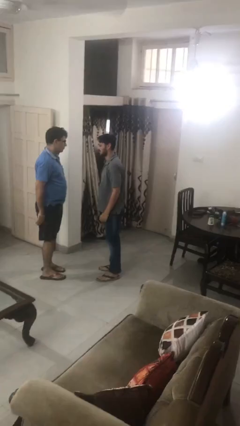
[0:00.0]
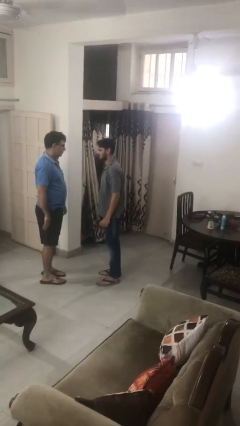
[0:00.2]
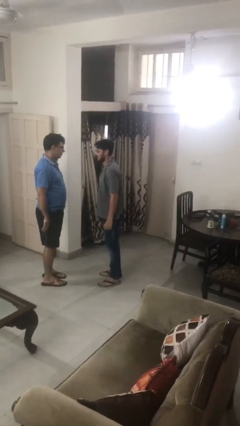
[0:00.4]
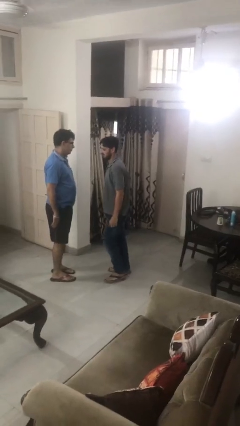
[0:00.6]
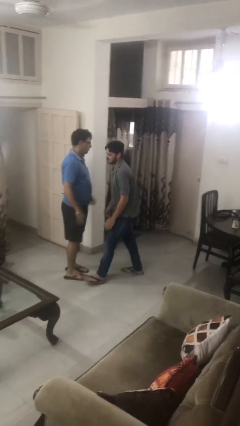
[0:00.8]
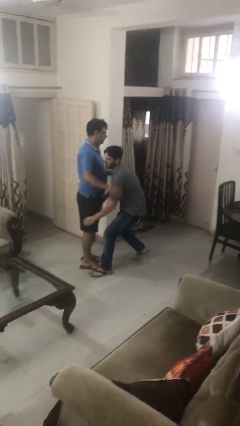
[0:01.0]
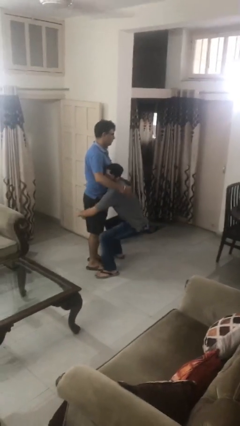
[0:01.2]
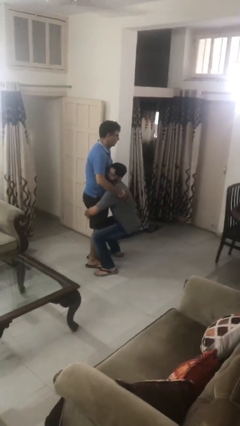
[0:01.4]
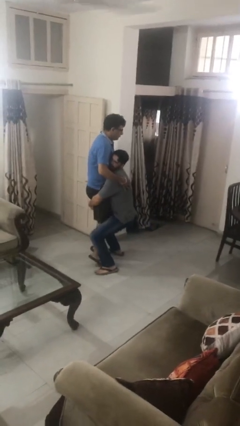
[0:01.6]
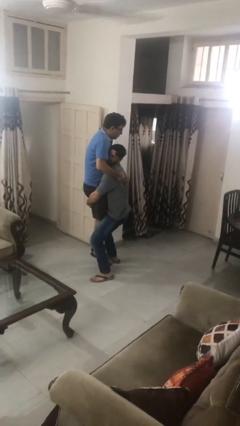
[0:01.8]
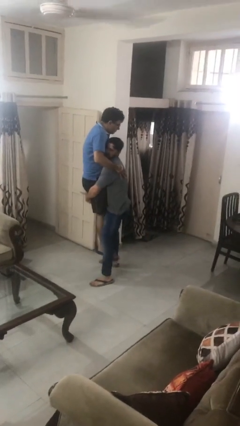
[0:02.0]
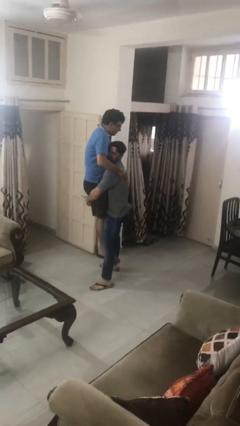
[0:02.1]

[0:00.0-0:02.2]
person picks up person

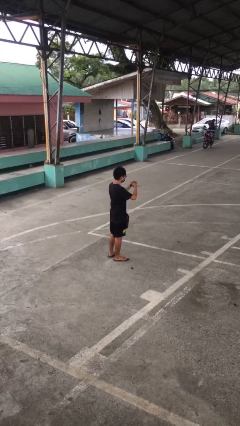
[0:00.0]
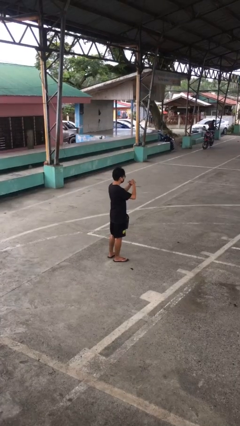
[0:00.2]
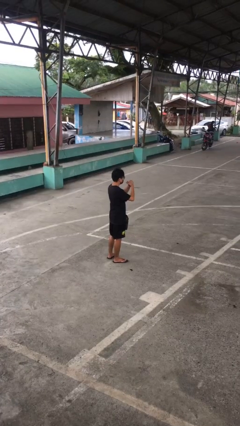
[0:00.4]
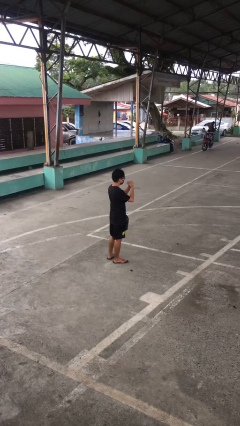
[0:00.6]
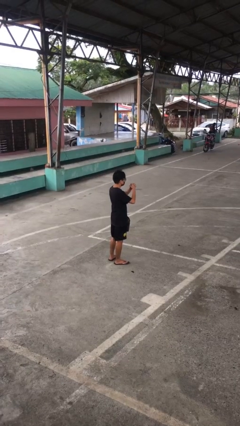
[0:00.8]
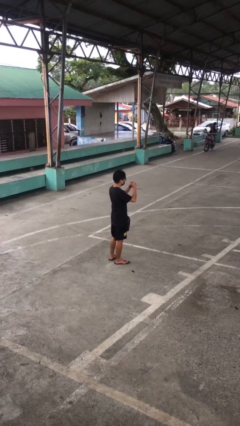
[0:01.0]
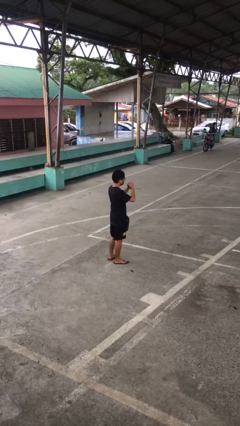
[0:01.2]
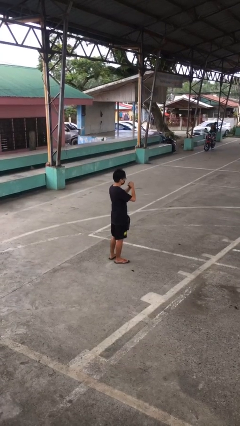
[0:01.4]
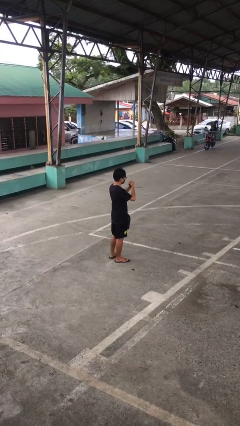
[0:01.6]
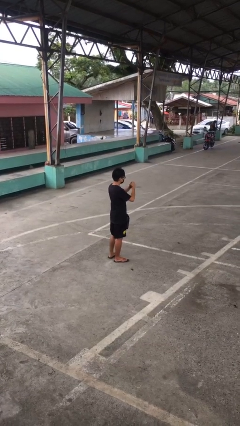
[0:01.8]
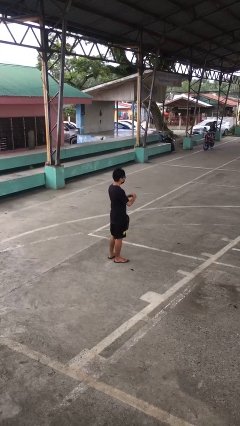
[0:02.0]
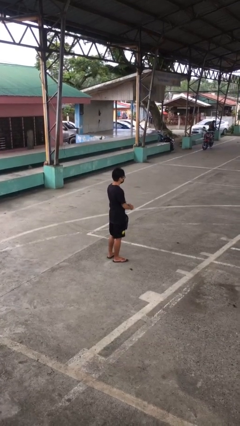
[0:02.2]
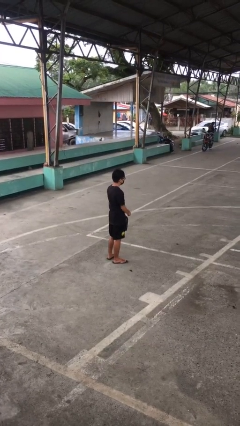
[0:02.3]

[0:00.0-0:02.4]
person cracks knuckles

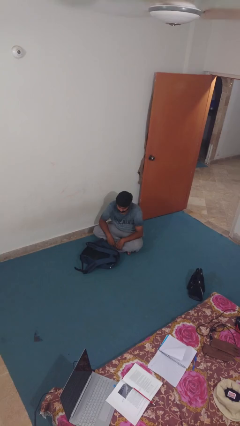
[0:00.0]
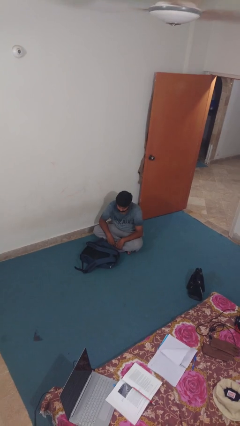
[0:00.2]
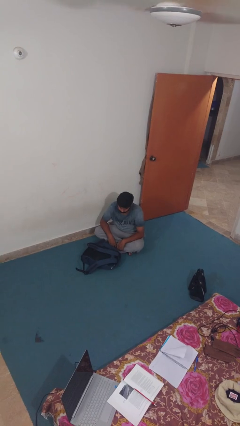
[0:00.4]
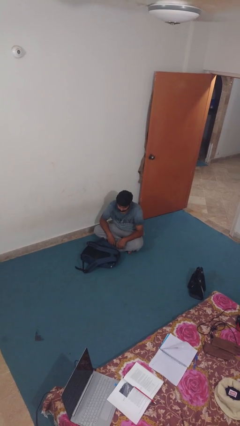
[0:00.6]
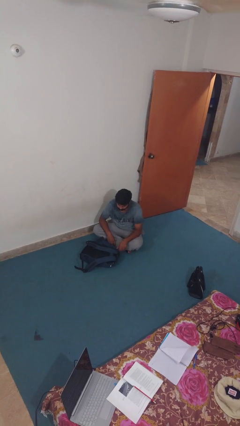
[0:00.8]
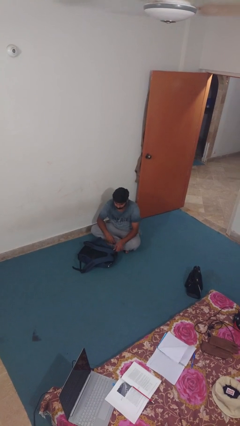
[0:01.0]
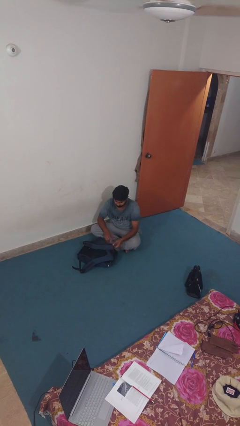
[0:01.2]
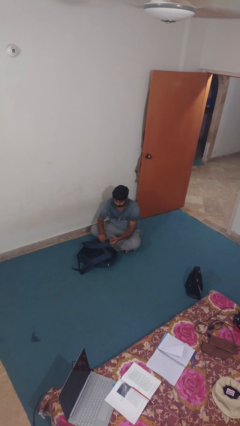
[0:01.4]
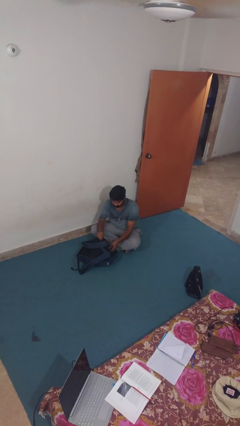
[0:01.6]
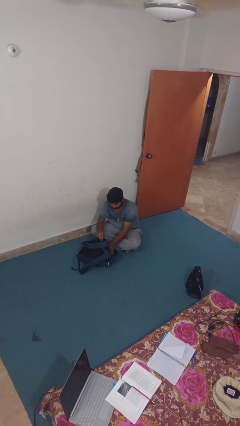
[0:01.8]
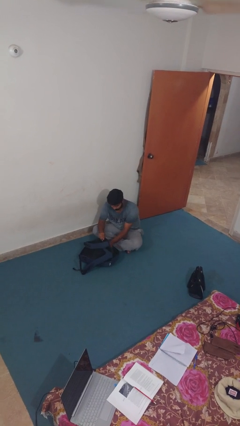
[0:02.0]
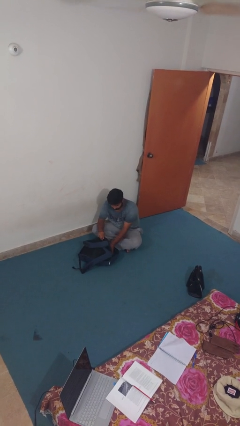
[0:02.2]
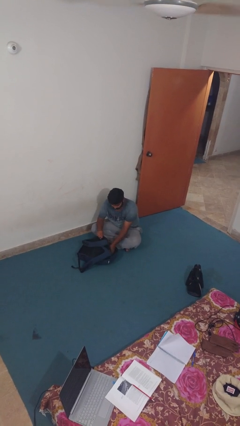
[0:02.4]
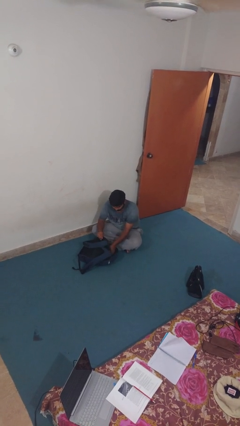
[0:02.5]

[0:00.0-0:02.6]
person searches in backpack

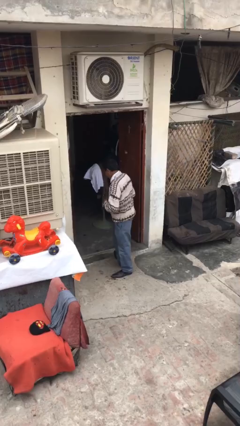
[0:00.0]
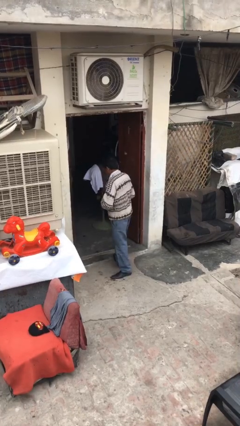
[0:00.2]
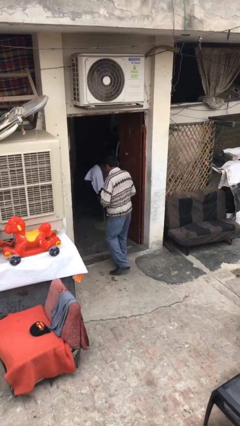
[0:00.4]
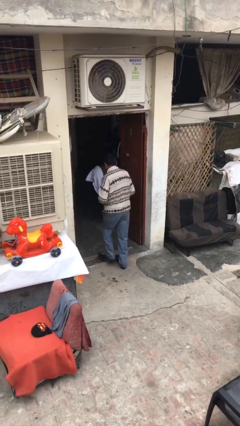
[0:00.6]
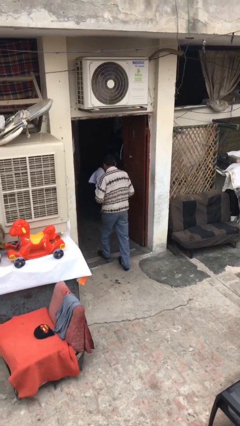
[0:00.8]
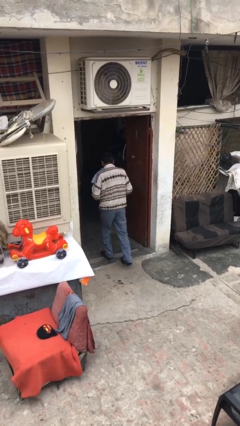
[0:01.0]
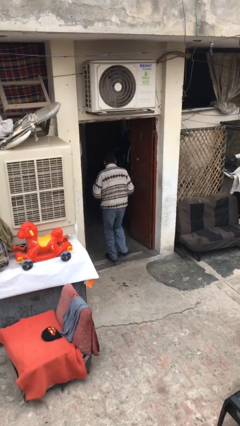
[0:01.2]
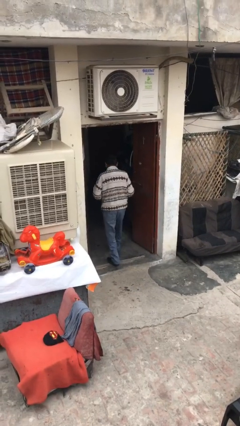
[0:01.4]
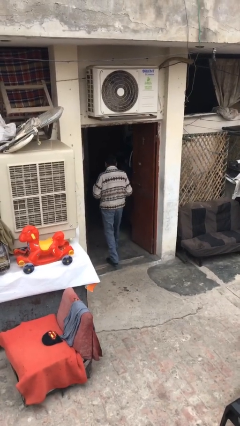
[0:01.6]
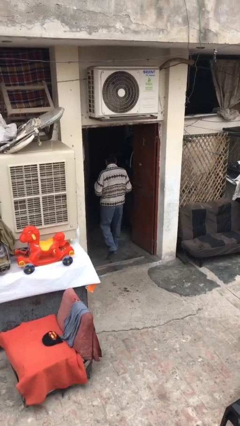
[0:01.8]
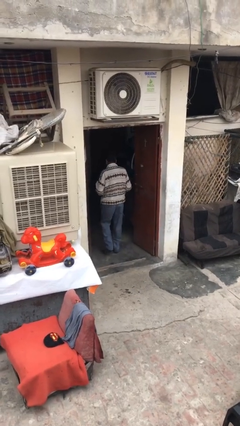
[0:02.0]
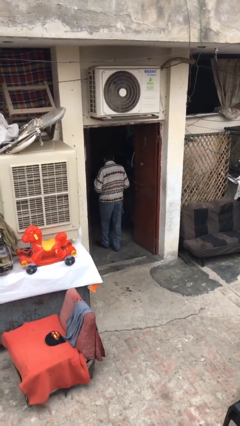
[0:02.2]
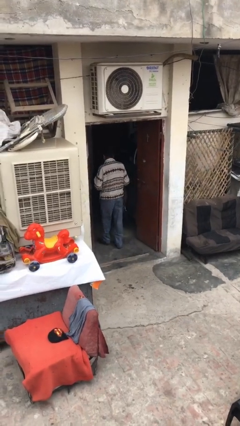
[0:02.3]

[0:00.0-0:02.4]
person exits scene through structure

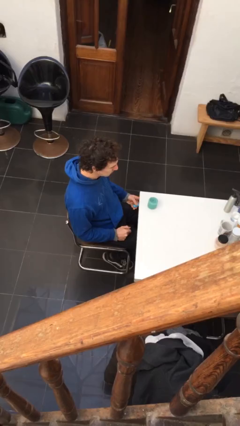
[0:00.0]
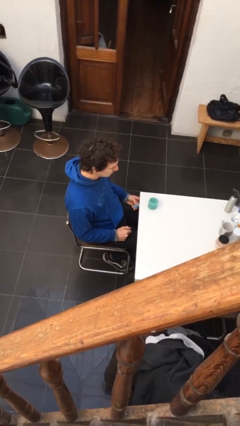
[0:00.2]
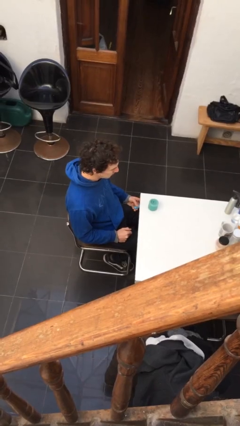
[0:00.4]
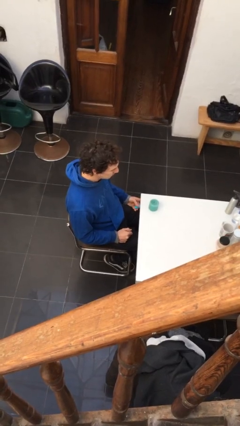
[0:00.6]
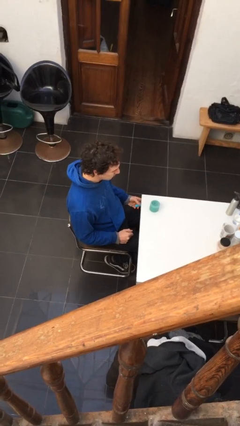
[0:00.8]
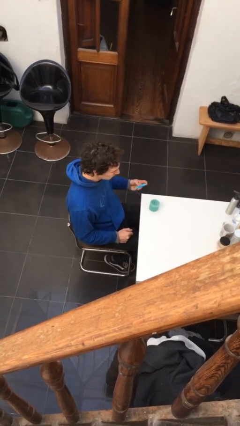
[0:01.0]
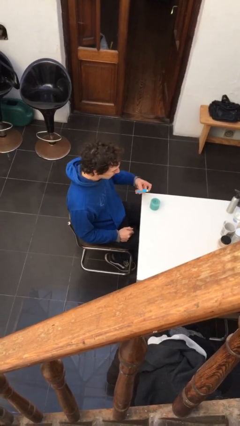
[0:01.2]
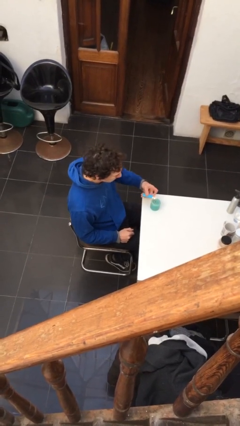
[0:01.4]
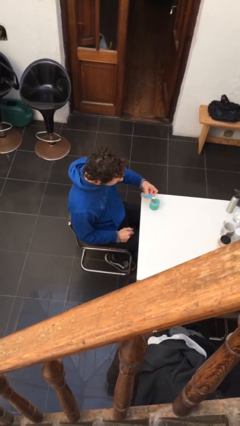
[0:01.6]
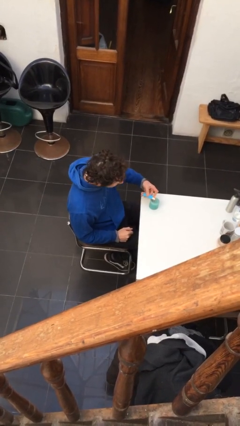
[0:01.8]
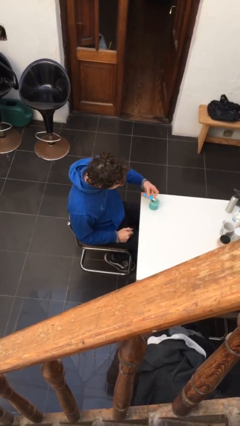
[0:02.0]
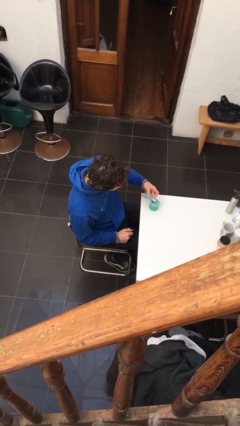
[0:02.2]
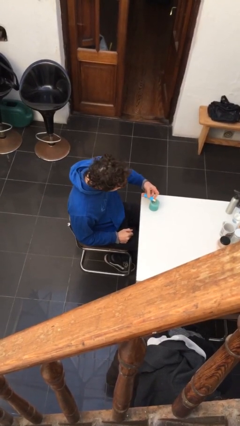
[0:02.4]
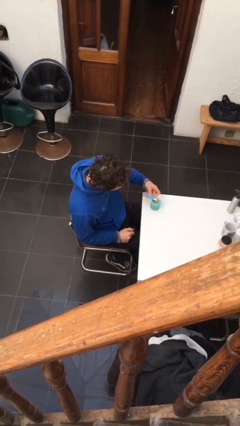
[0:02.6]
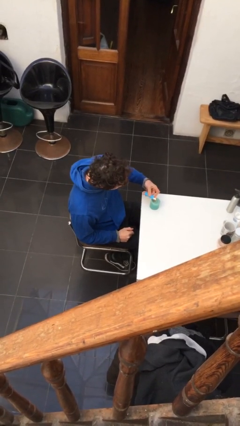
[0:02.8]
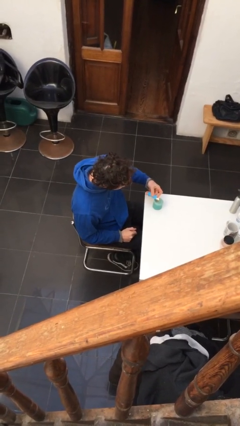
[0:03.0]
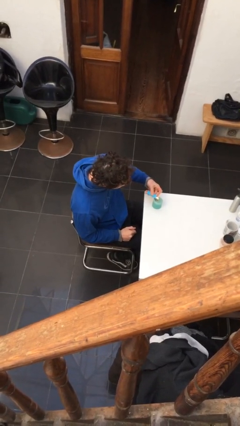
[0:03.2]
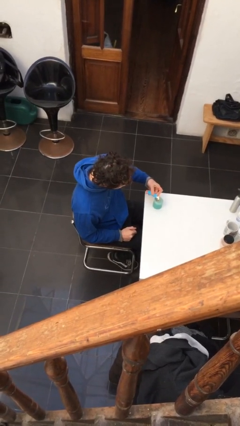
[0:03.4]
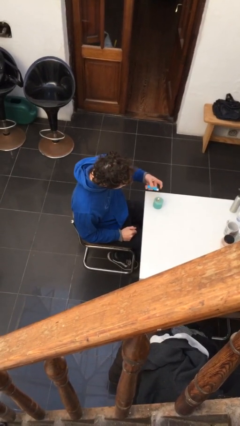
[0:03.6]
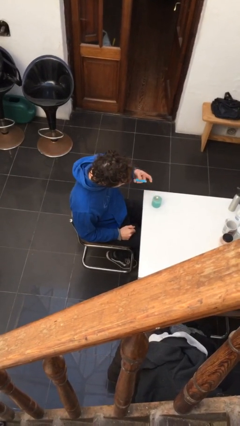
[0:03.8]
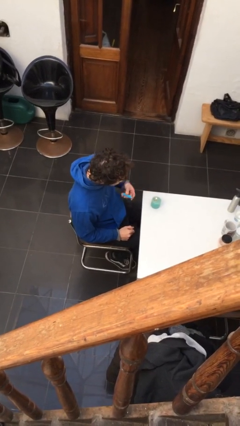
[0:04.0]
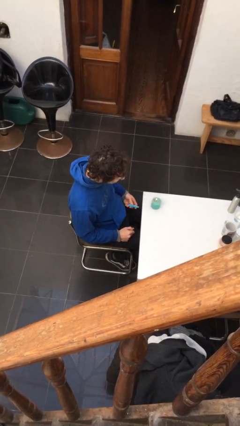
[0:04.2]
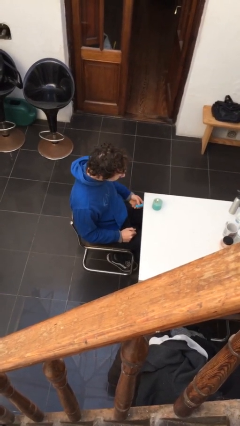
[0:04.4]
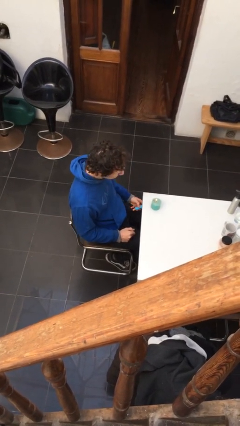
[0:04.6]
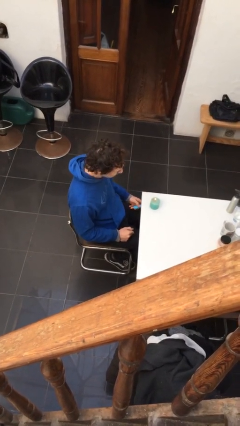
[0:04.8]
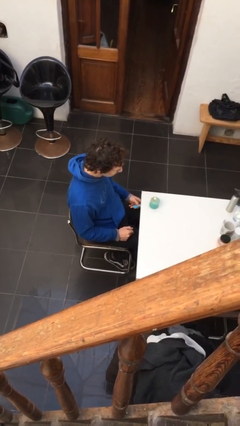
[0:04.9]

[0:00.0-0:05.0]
person lights candle

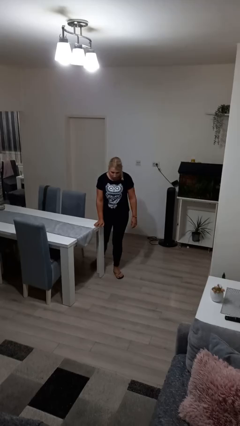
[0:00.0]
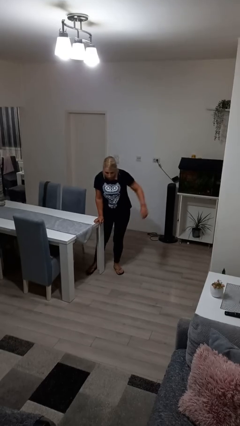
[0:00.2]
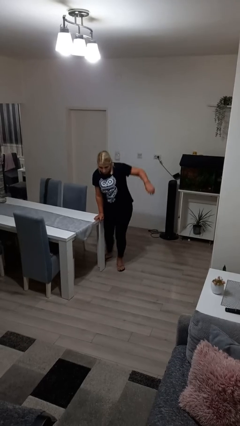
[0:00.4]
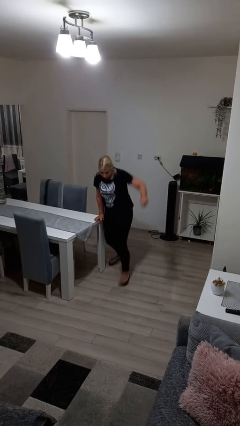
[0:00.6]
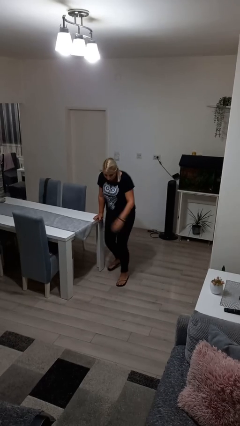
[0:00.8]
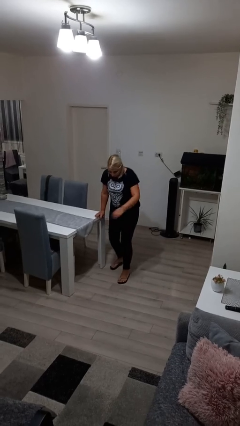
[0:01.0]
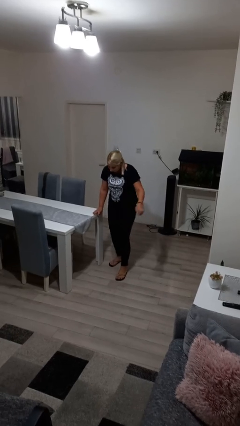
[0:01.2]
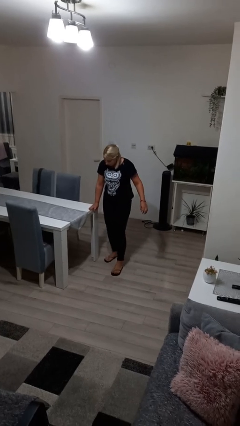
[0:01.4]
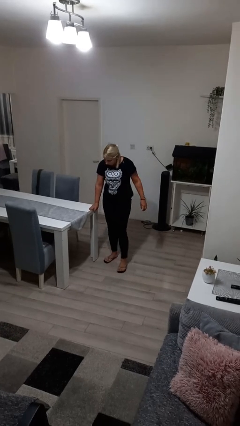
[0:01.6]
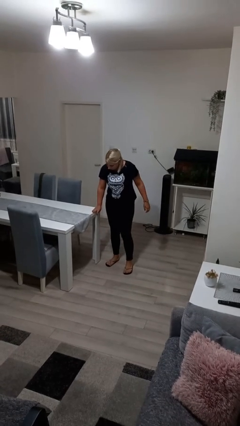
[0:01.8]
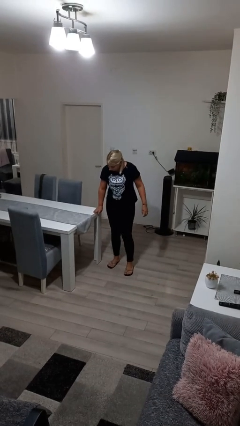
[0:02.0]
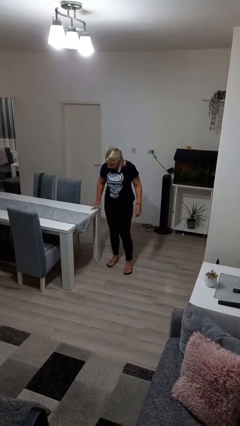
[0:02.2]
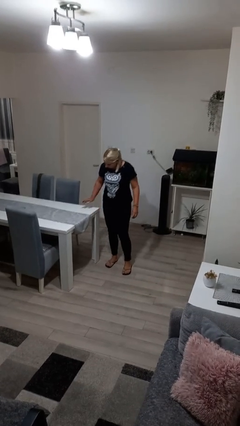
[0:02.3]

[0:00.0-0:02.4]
person bumps into table

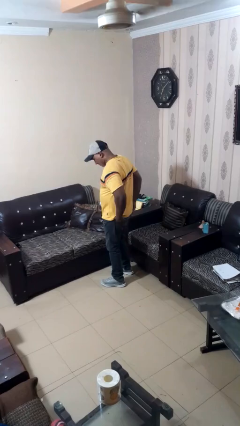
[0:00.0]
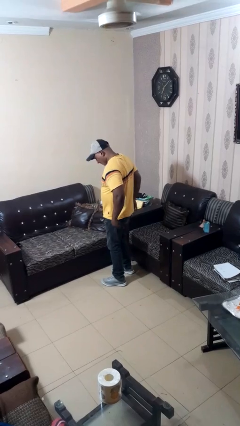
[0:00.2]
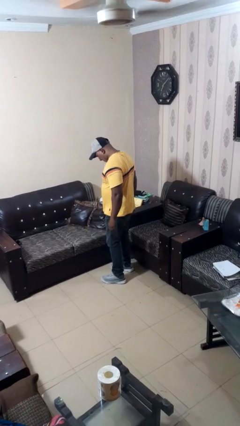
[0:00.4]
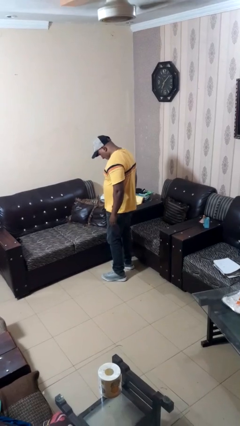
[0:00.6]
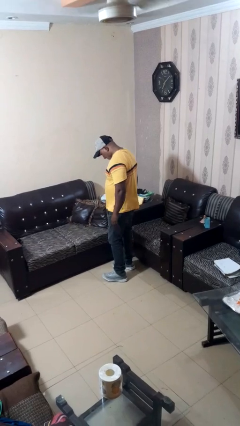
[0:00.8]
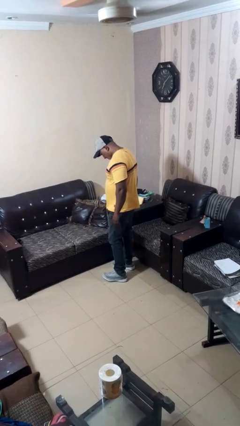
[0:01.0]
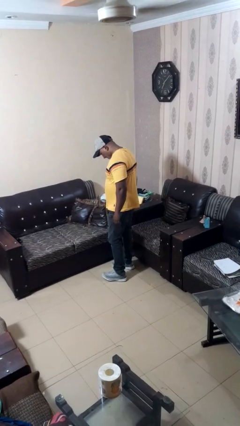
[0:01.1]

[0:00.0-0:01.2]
person puts hands in back pockets
